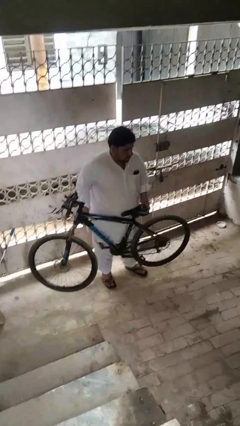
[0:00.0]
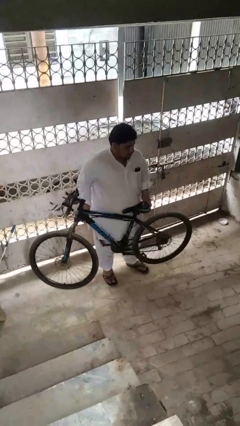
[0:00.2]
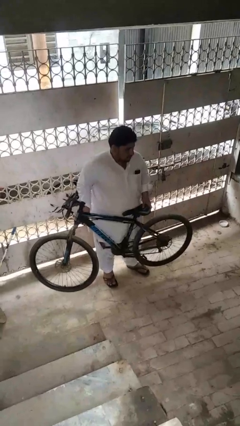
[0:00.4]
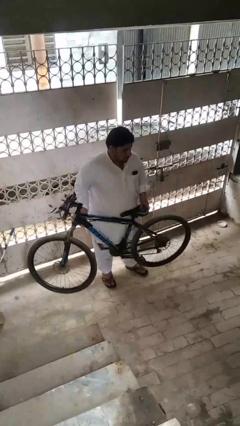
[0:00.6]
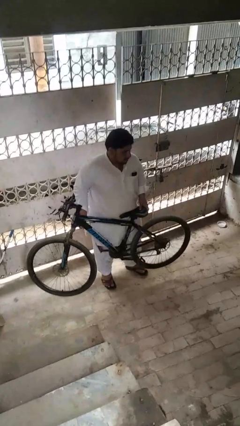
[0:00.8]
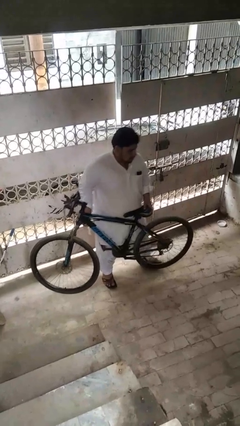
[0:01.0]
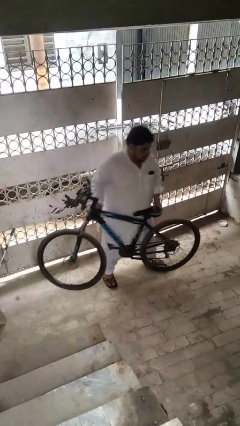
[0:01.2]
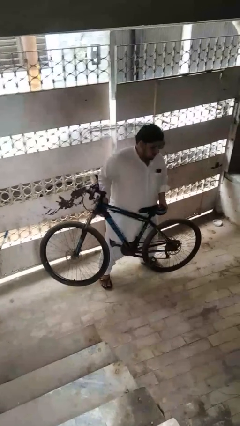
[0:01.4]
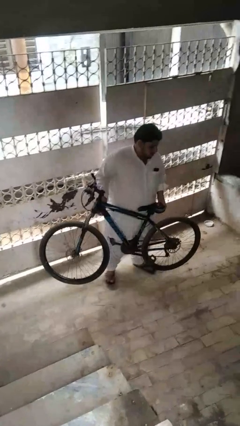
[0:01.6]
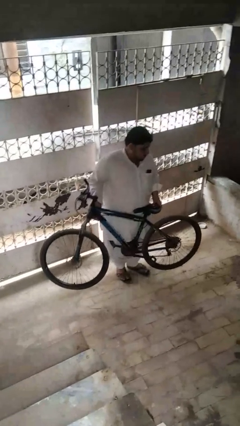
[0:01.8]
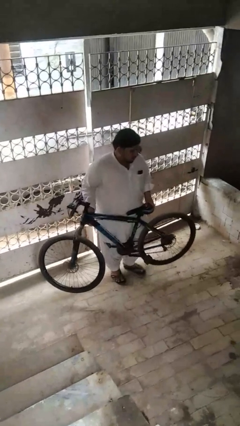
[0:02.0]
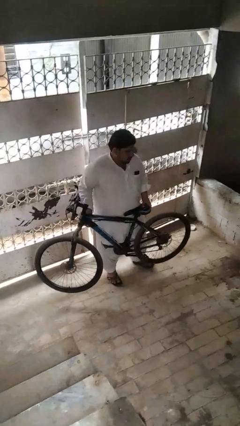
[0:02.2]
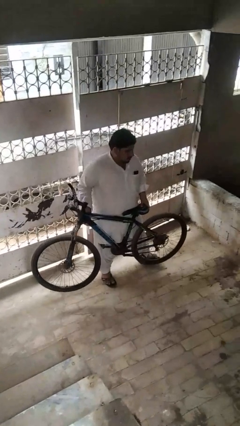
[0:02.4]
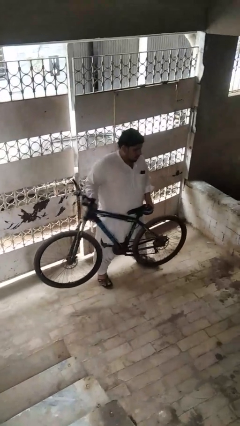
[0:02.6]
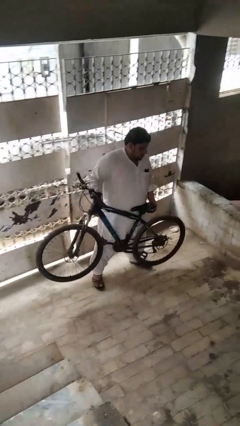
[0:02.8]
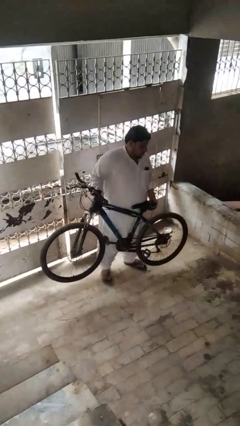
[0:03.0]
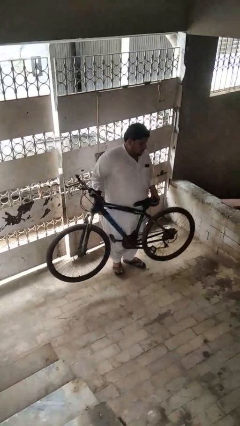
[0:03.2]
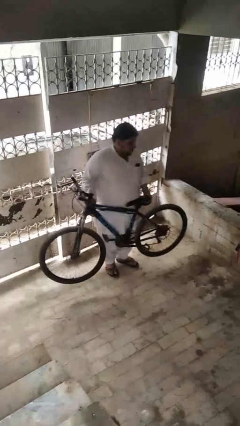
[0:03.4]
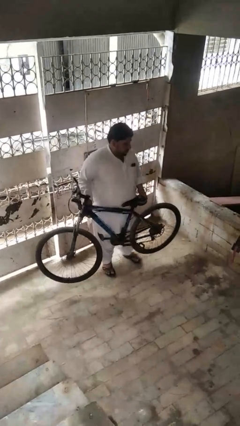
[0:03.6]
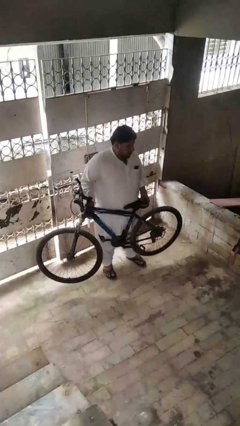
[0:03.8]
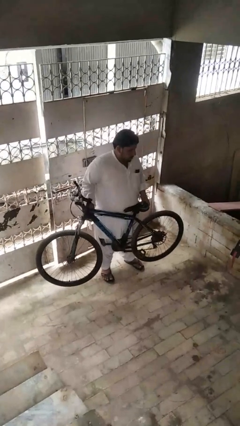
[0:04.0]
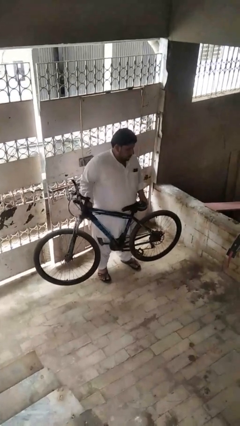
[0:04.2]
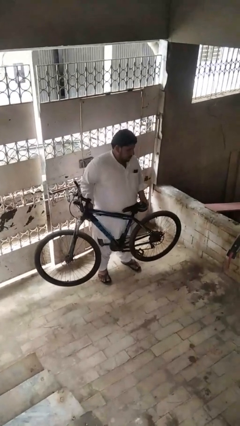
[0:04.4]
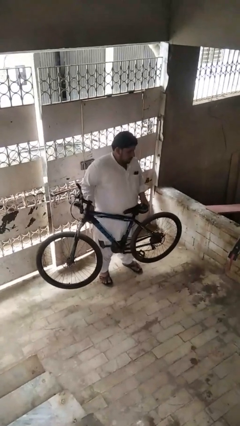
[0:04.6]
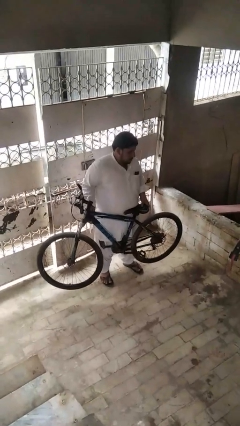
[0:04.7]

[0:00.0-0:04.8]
person carries bicycle

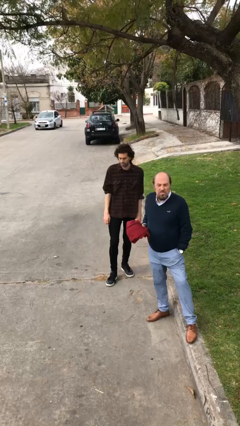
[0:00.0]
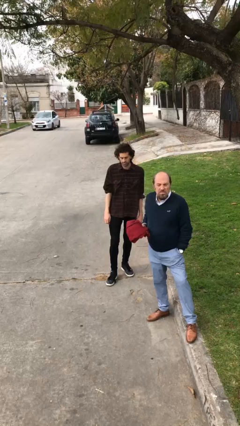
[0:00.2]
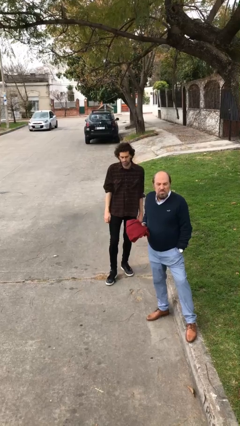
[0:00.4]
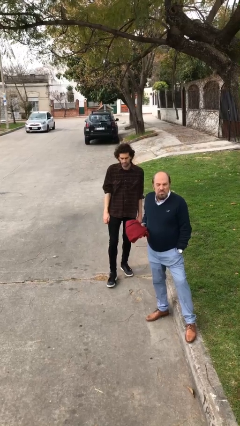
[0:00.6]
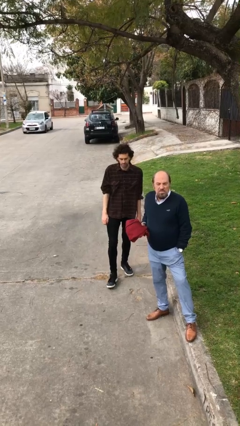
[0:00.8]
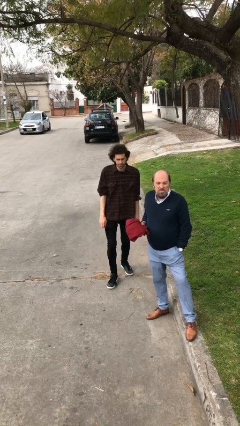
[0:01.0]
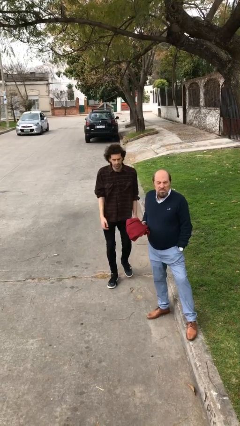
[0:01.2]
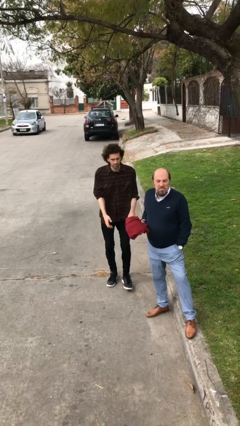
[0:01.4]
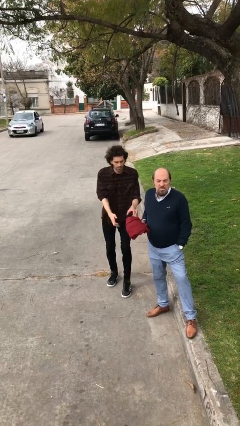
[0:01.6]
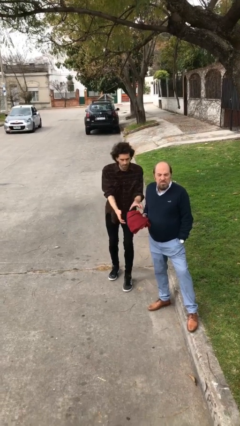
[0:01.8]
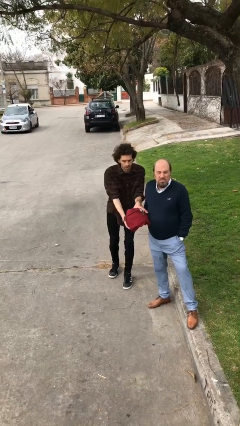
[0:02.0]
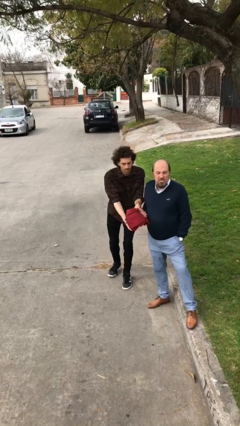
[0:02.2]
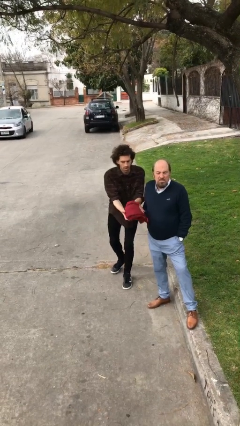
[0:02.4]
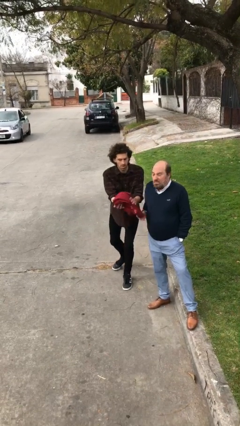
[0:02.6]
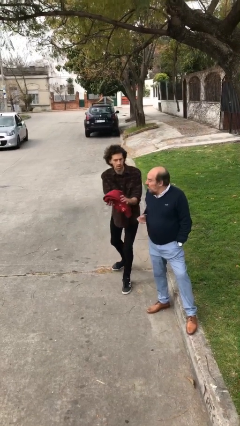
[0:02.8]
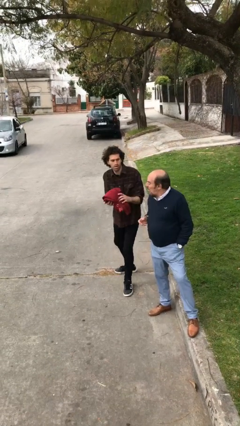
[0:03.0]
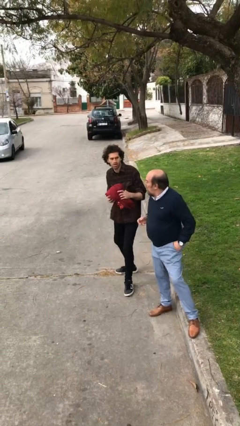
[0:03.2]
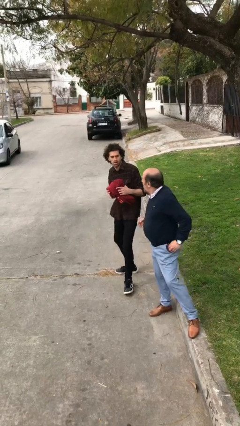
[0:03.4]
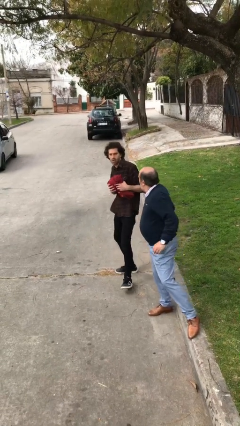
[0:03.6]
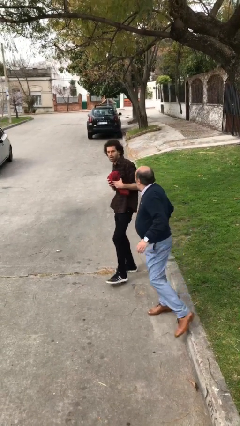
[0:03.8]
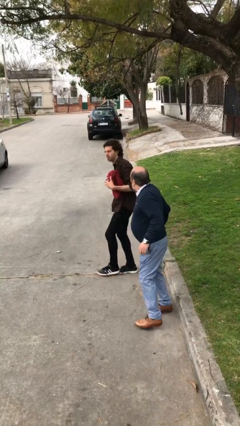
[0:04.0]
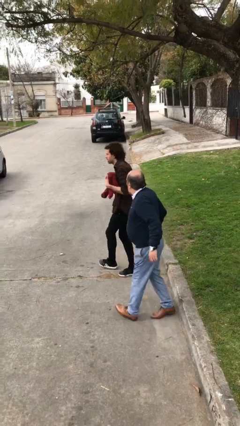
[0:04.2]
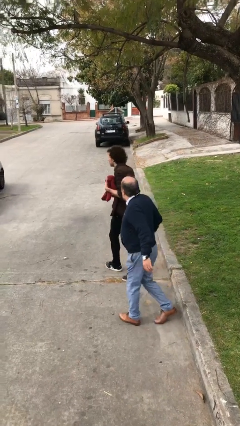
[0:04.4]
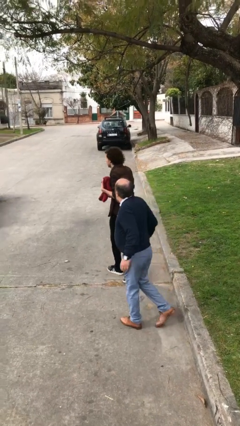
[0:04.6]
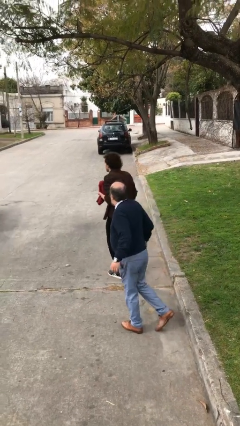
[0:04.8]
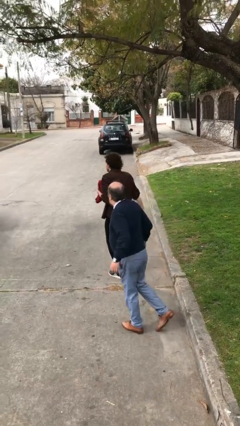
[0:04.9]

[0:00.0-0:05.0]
person steals object from person
